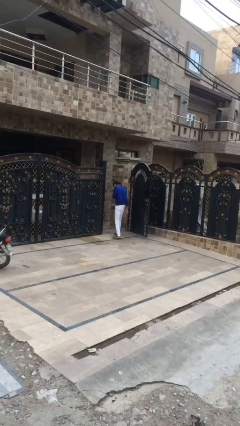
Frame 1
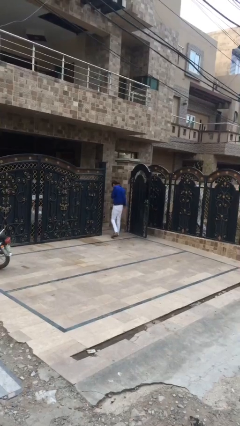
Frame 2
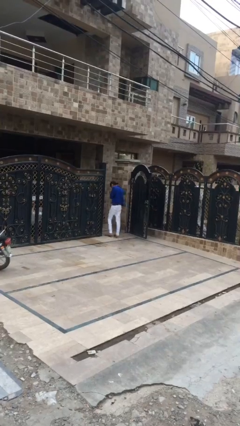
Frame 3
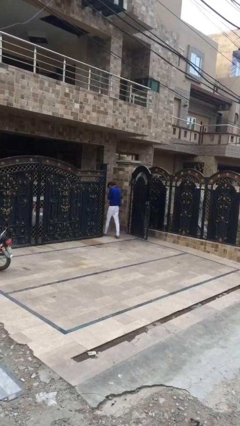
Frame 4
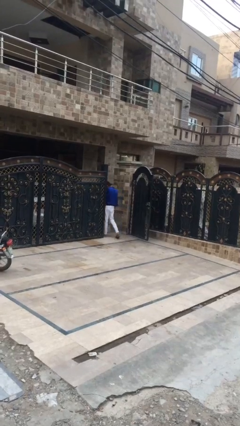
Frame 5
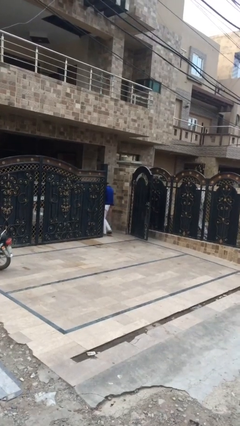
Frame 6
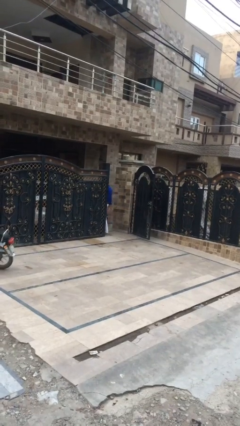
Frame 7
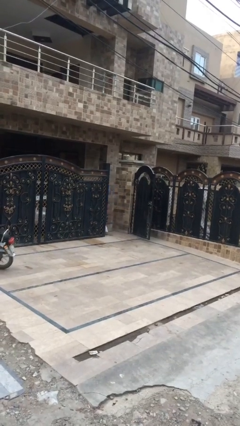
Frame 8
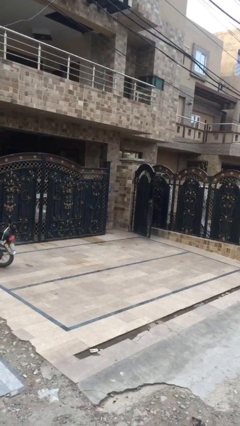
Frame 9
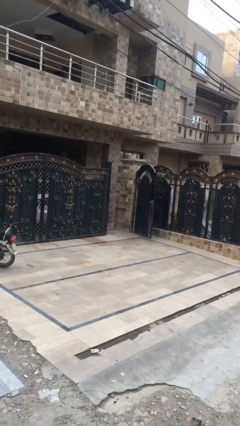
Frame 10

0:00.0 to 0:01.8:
person exits scene through structure

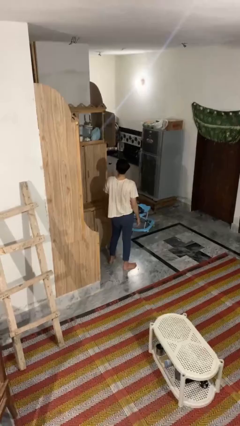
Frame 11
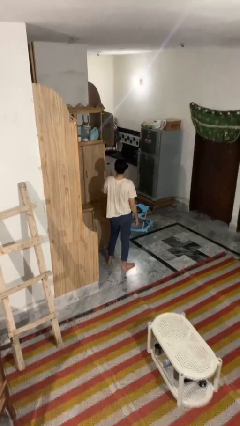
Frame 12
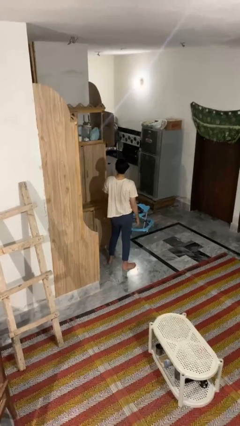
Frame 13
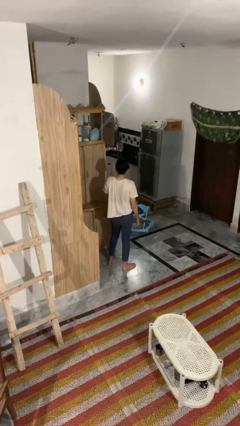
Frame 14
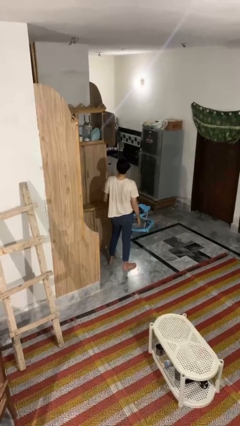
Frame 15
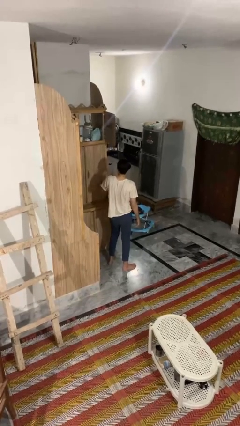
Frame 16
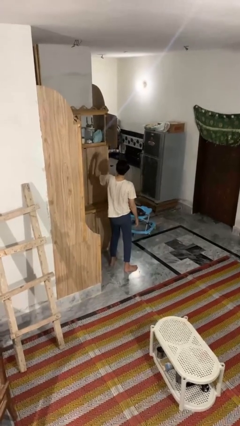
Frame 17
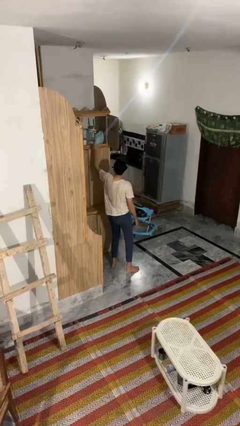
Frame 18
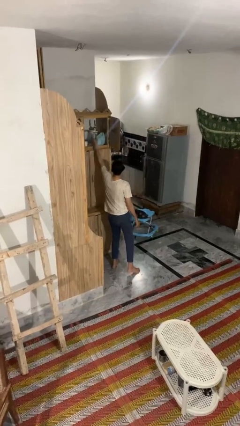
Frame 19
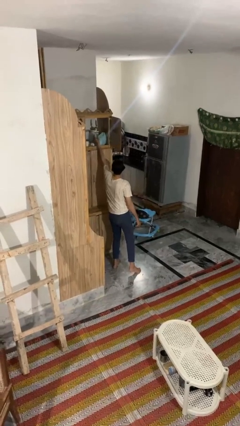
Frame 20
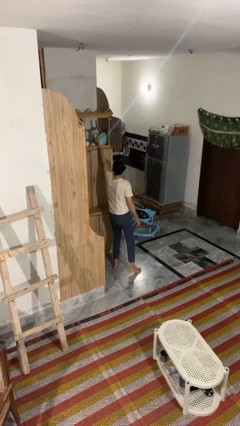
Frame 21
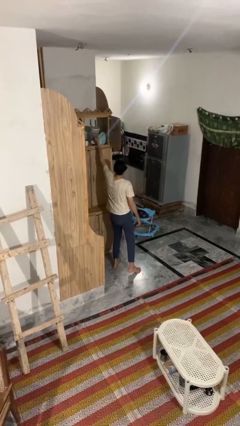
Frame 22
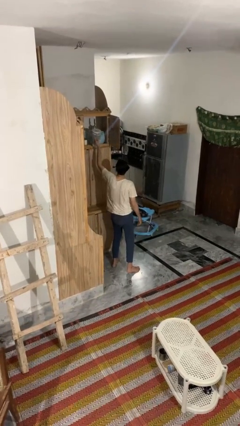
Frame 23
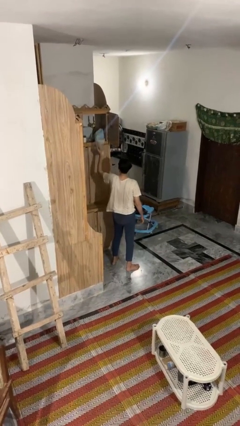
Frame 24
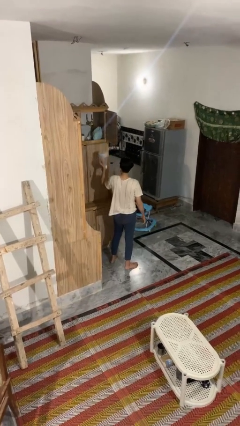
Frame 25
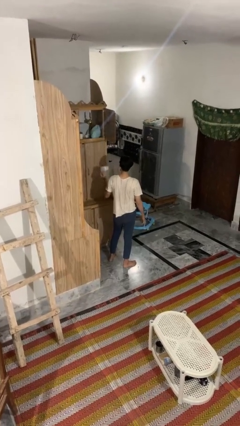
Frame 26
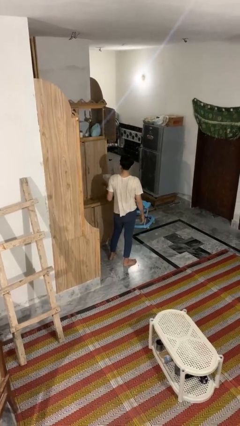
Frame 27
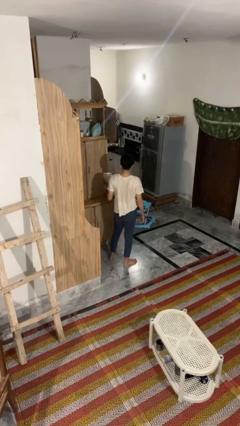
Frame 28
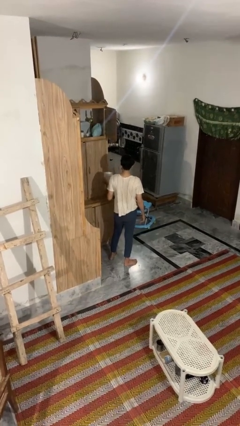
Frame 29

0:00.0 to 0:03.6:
person picks up object from shelf

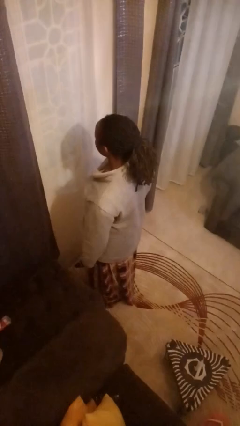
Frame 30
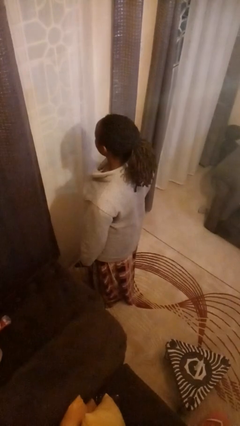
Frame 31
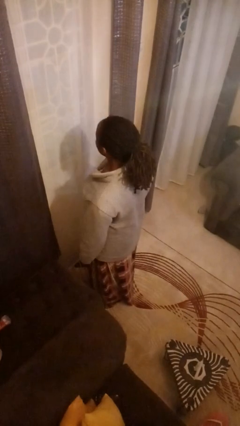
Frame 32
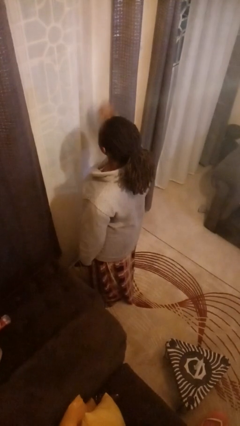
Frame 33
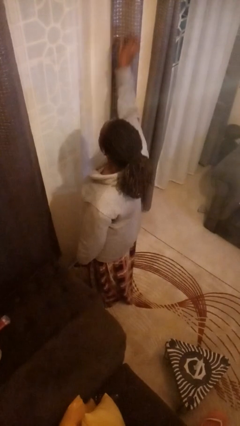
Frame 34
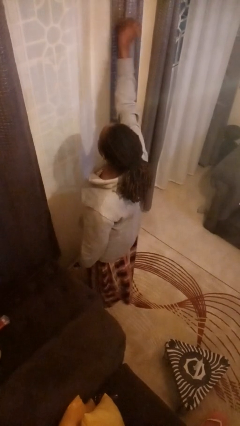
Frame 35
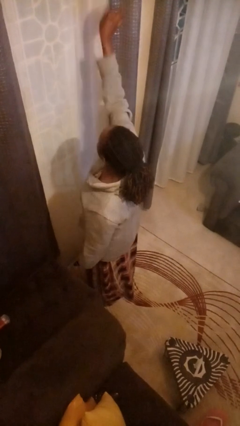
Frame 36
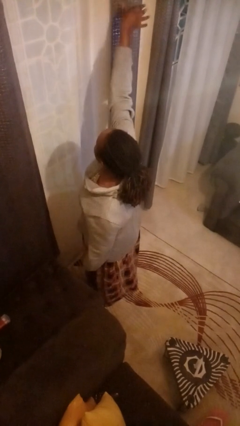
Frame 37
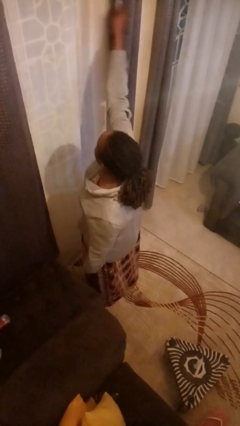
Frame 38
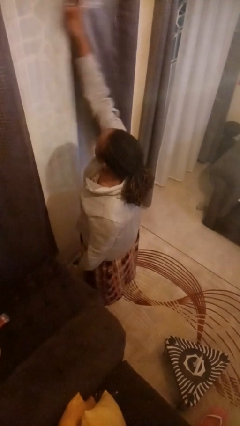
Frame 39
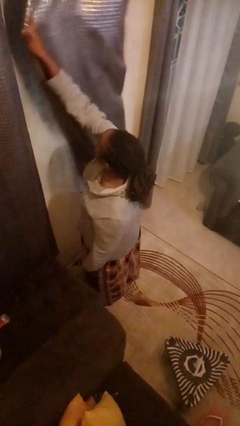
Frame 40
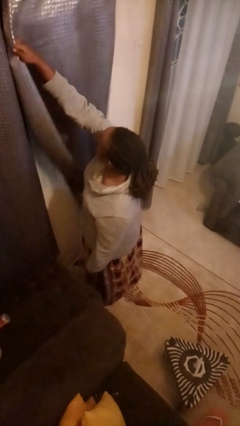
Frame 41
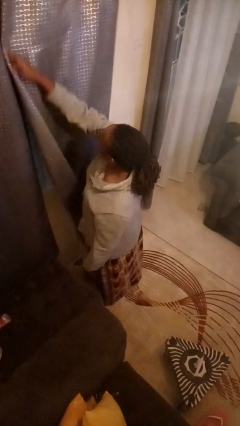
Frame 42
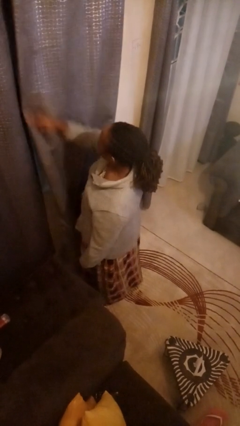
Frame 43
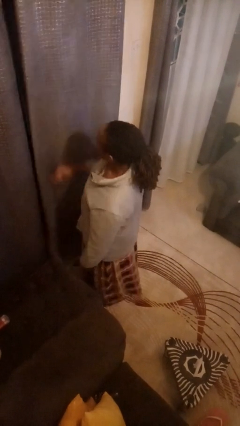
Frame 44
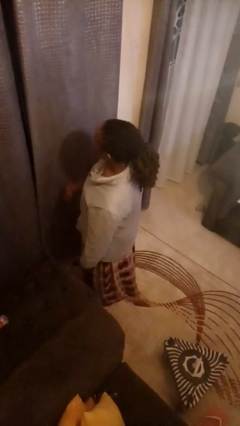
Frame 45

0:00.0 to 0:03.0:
person closes curtains

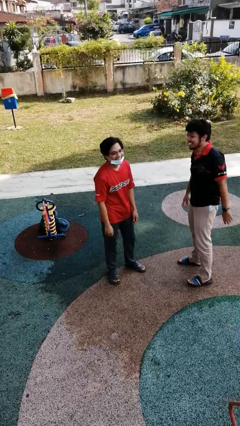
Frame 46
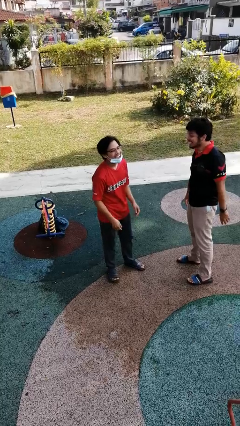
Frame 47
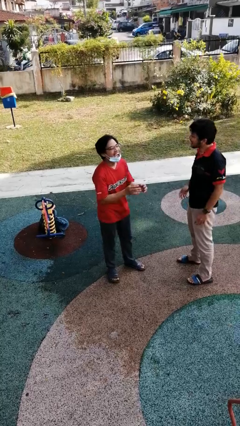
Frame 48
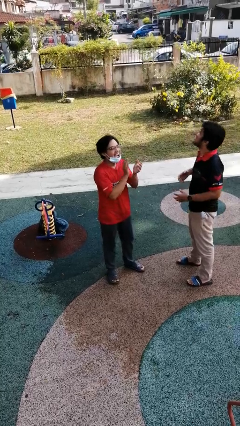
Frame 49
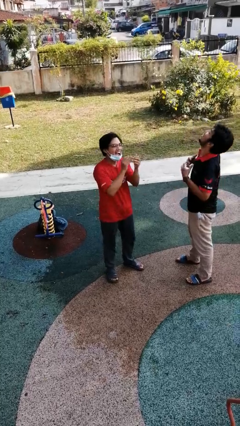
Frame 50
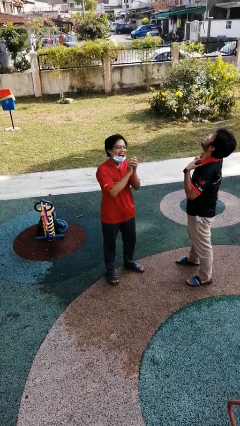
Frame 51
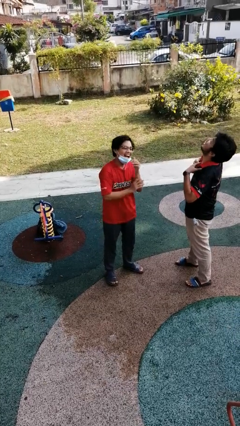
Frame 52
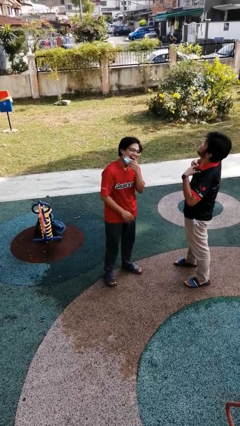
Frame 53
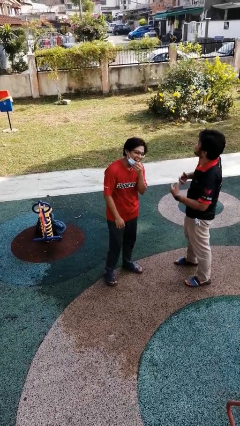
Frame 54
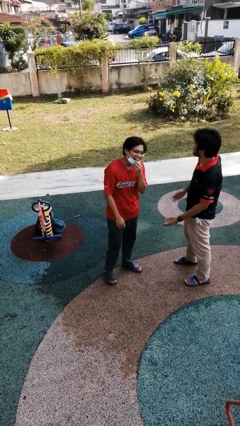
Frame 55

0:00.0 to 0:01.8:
person laughs with person

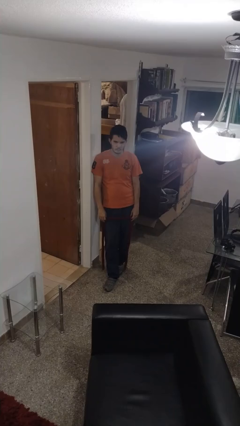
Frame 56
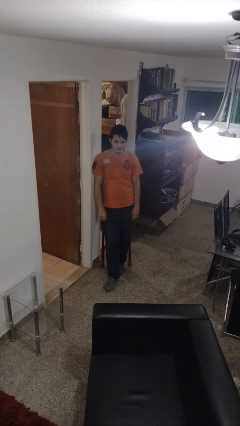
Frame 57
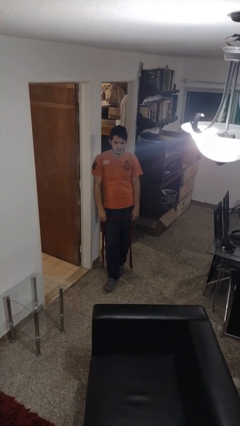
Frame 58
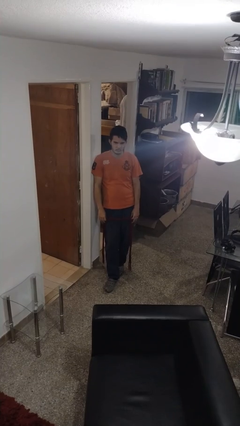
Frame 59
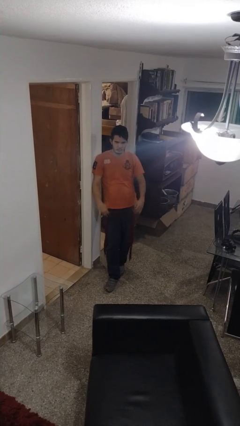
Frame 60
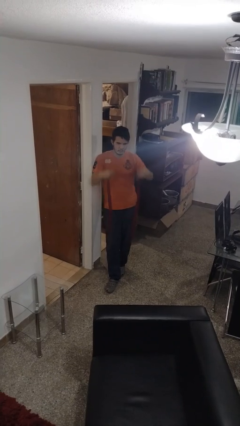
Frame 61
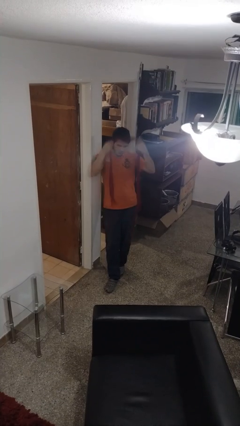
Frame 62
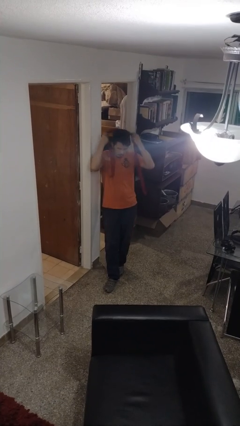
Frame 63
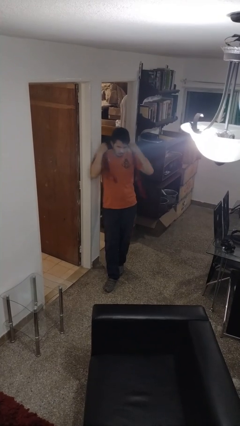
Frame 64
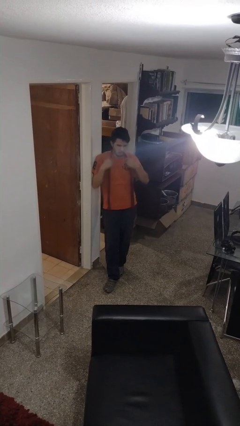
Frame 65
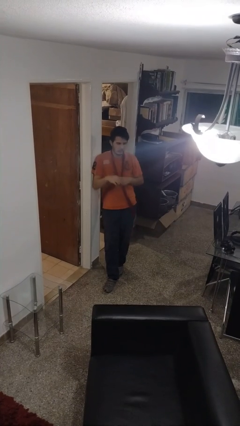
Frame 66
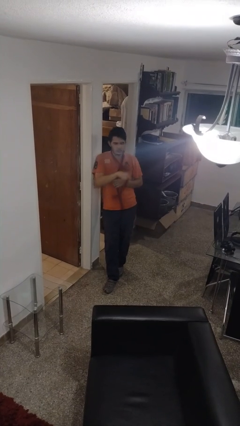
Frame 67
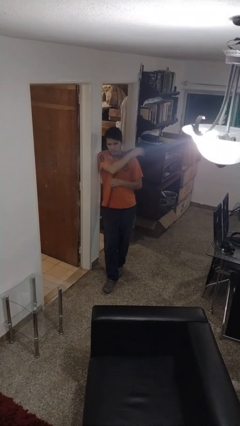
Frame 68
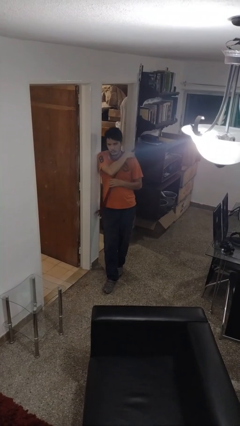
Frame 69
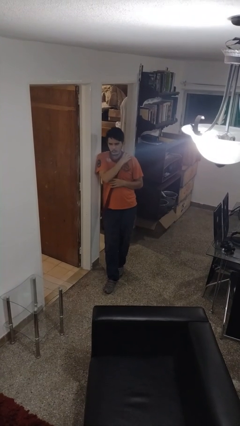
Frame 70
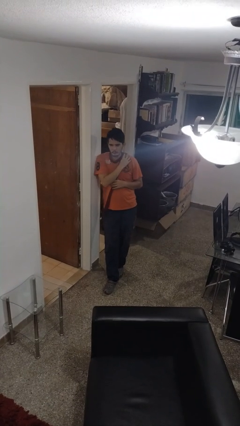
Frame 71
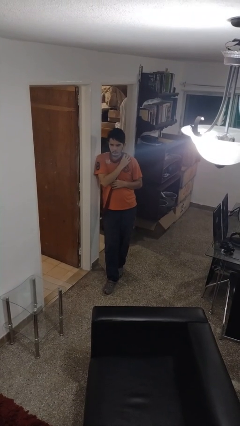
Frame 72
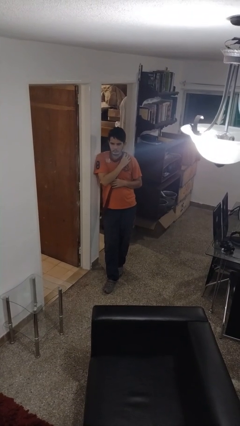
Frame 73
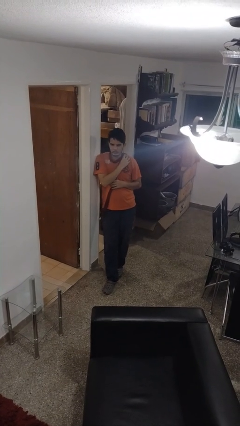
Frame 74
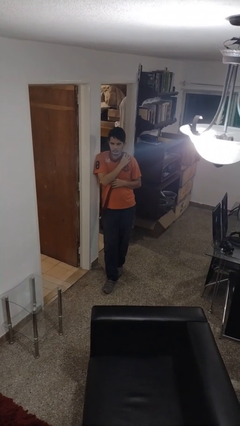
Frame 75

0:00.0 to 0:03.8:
person puts on scarf

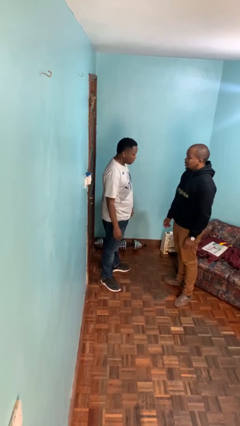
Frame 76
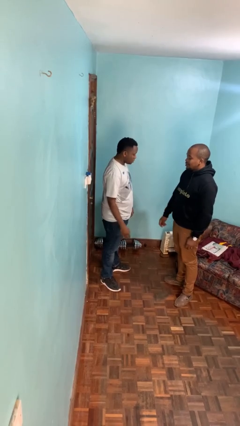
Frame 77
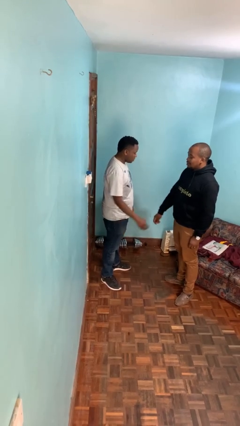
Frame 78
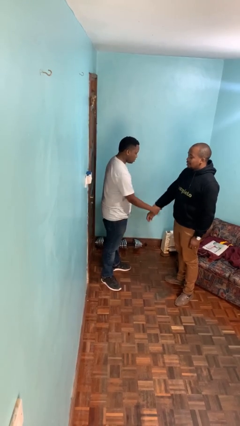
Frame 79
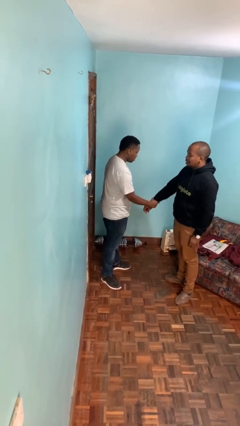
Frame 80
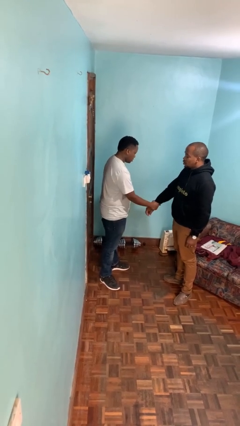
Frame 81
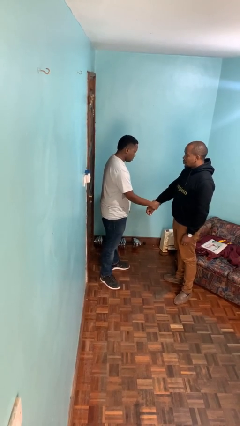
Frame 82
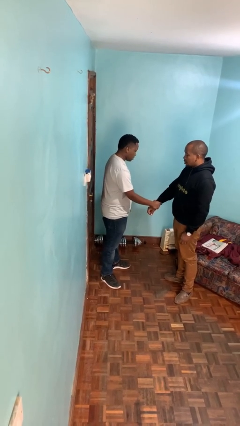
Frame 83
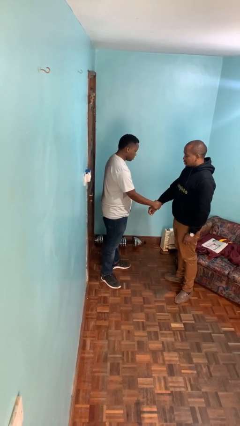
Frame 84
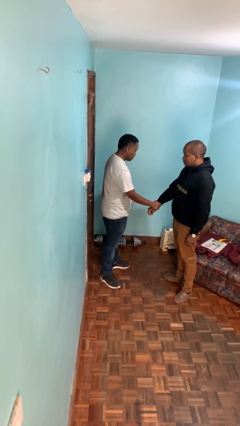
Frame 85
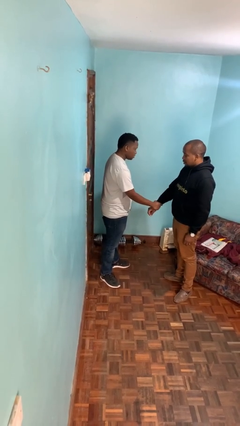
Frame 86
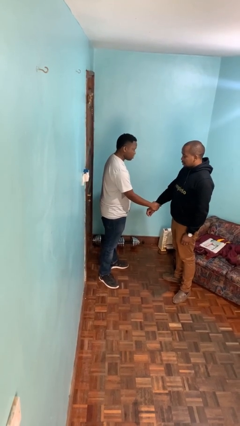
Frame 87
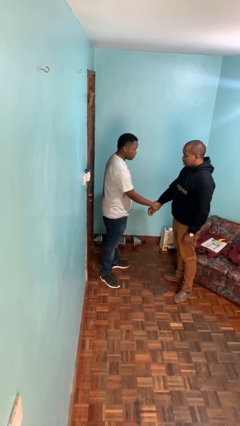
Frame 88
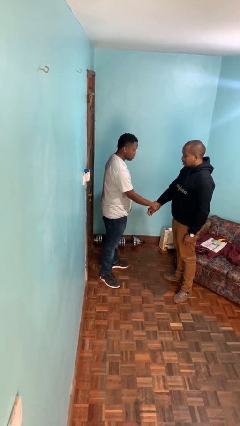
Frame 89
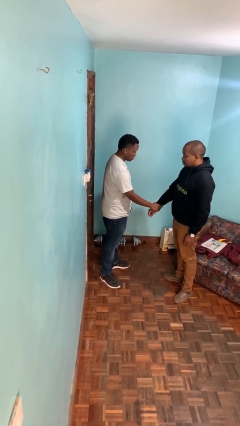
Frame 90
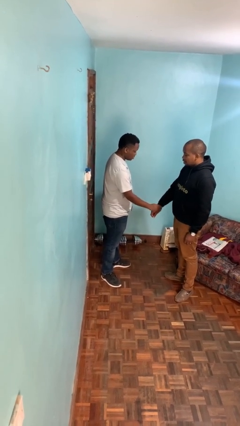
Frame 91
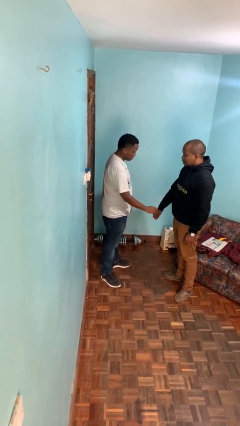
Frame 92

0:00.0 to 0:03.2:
person grabs person by forearm

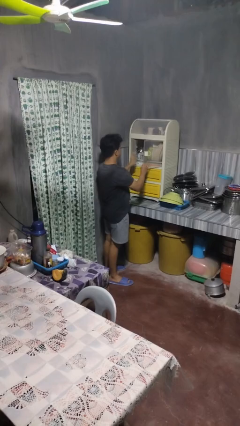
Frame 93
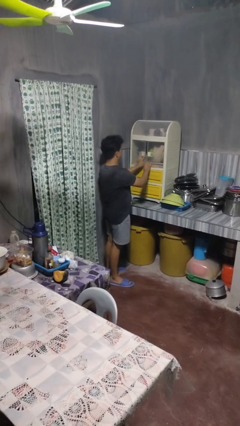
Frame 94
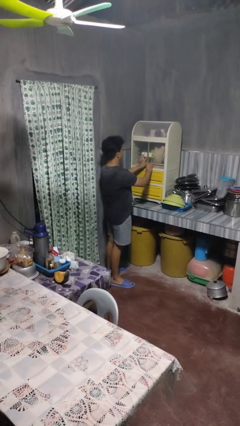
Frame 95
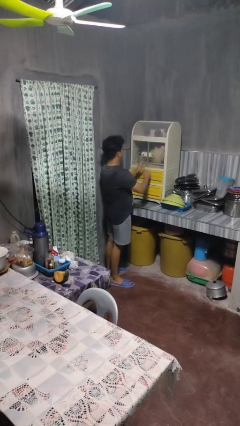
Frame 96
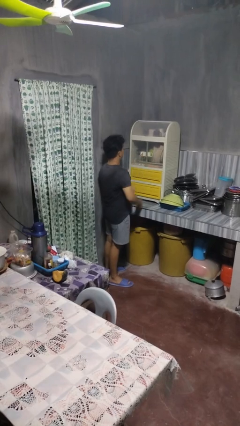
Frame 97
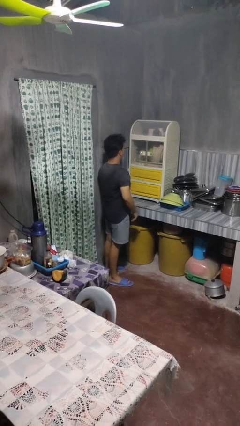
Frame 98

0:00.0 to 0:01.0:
person closes cabinet
